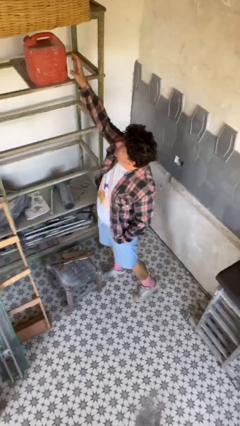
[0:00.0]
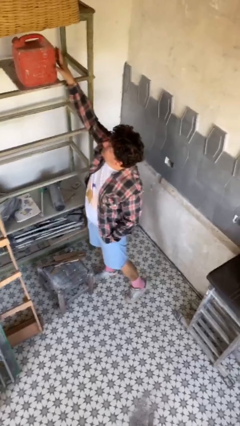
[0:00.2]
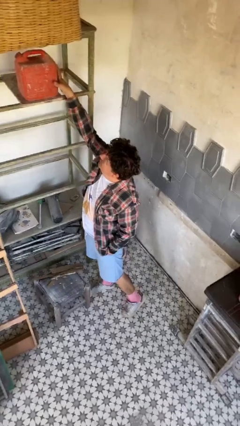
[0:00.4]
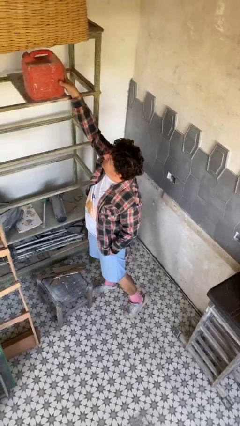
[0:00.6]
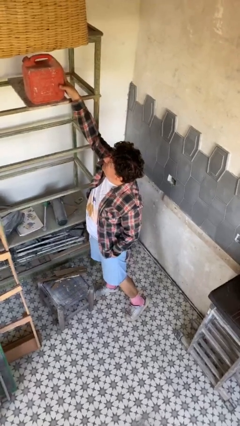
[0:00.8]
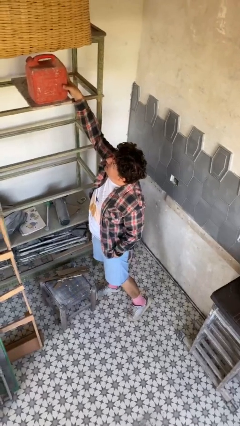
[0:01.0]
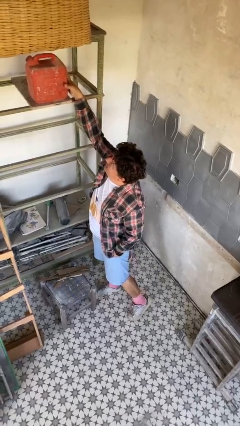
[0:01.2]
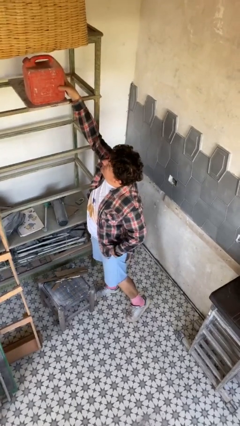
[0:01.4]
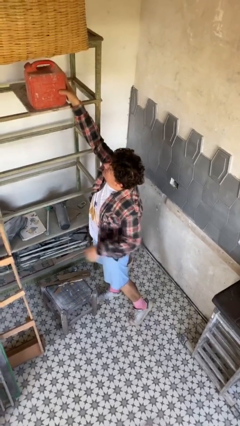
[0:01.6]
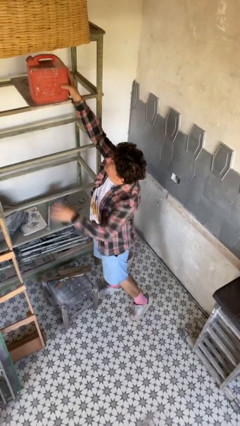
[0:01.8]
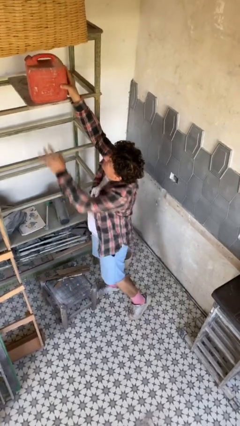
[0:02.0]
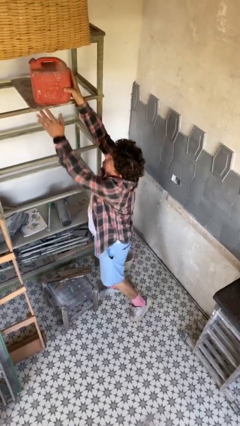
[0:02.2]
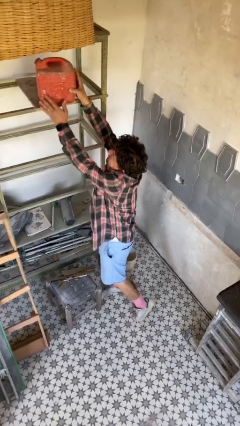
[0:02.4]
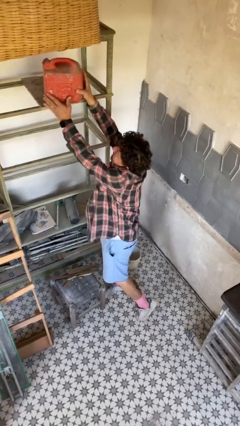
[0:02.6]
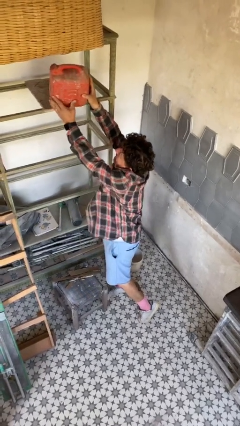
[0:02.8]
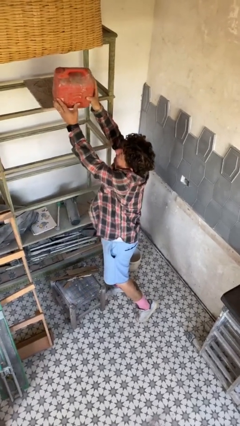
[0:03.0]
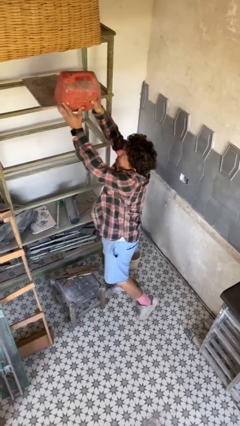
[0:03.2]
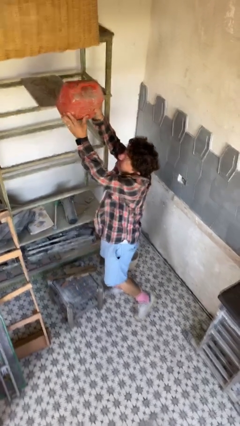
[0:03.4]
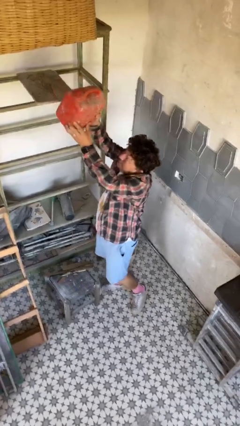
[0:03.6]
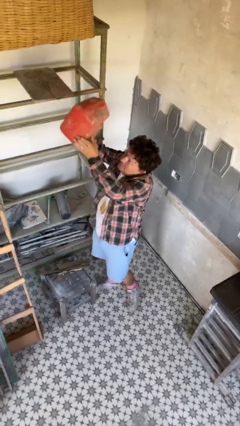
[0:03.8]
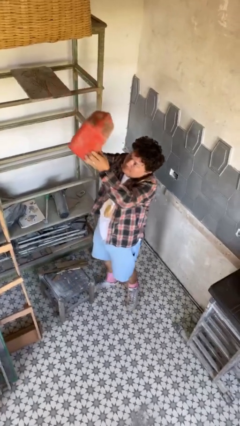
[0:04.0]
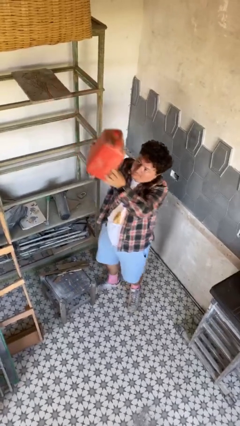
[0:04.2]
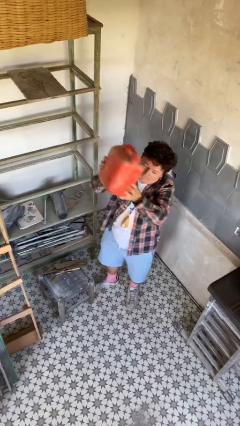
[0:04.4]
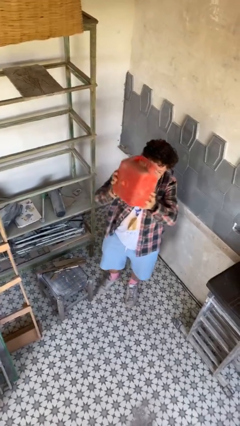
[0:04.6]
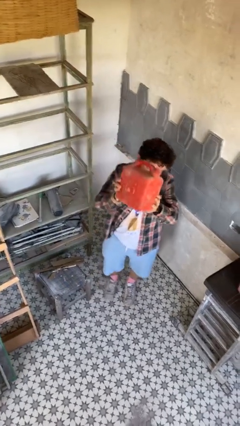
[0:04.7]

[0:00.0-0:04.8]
person picks up object from shelf

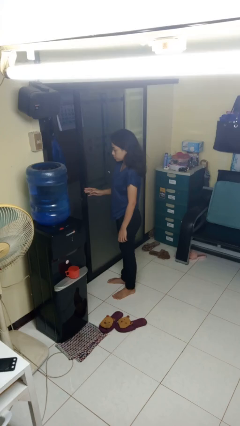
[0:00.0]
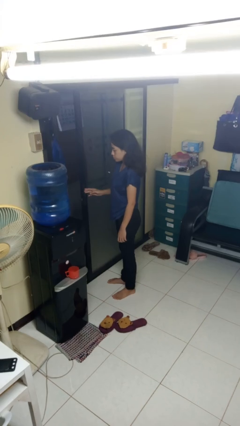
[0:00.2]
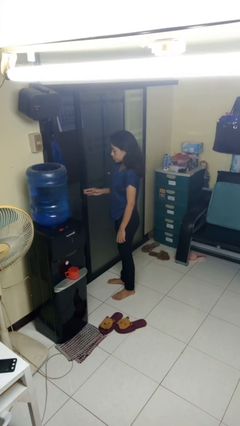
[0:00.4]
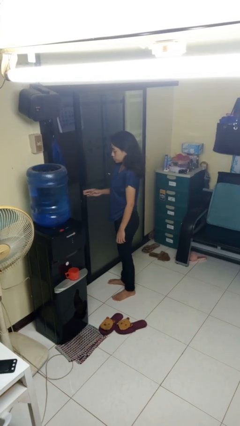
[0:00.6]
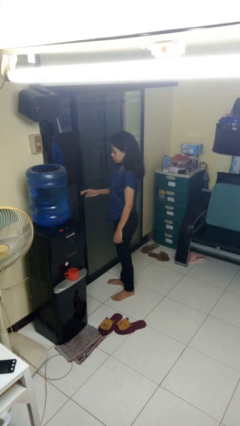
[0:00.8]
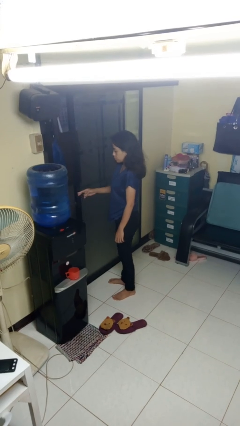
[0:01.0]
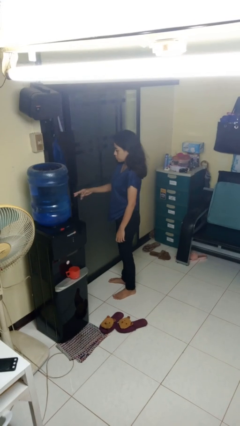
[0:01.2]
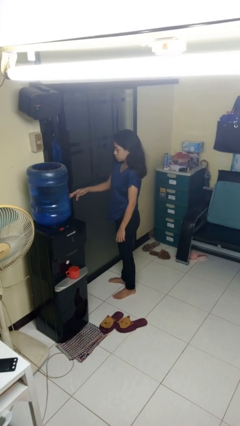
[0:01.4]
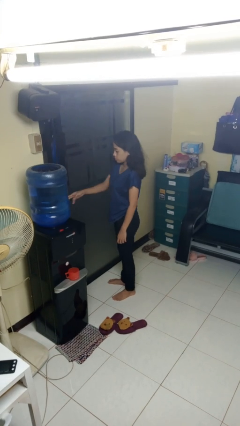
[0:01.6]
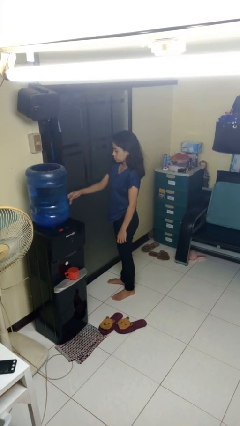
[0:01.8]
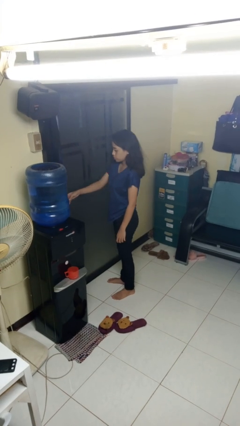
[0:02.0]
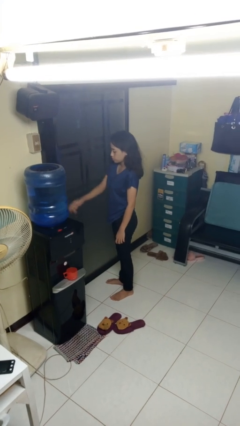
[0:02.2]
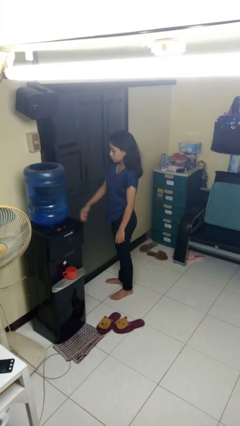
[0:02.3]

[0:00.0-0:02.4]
person closes sliding door

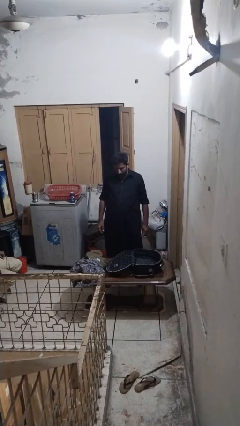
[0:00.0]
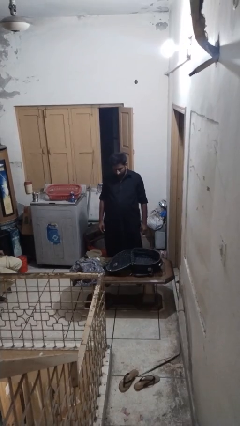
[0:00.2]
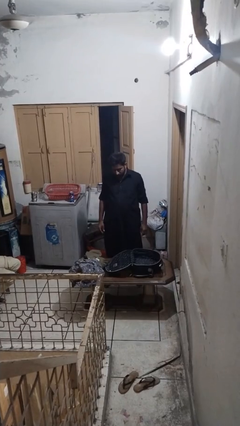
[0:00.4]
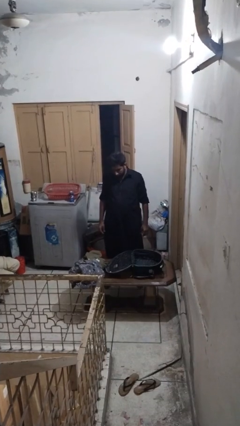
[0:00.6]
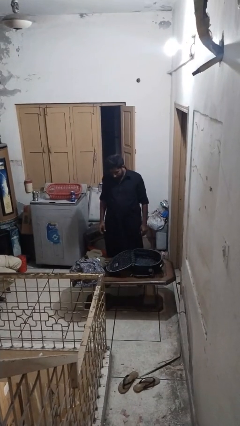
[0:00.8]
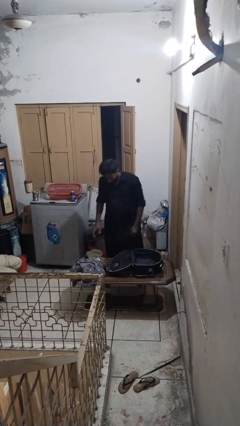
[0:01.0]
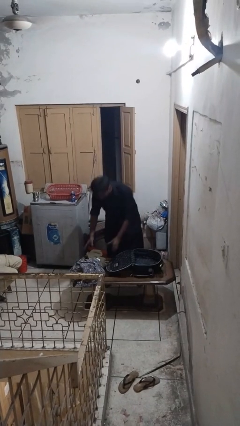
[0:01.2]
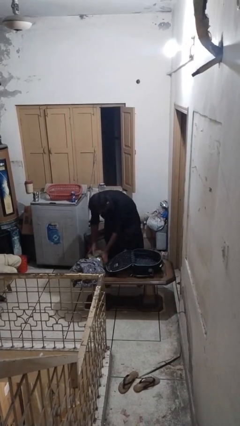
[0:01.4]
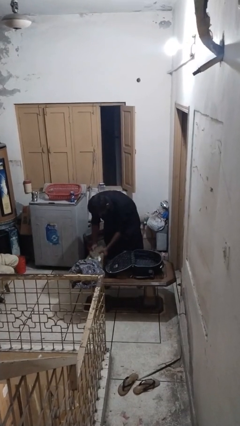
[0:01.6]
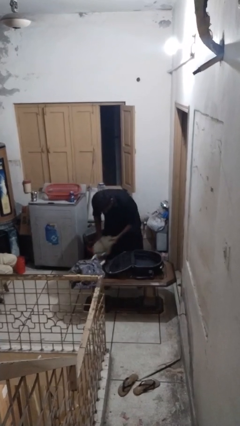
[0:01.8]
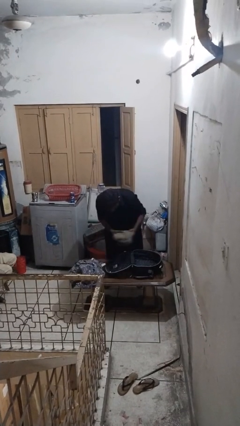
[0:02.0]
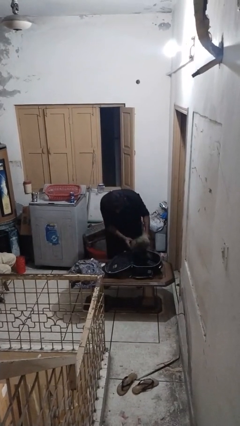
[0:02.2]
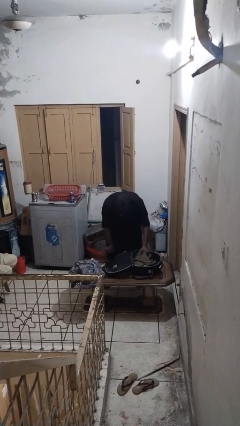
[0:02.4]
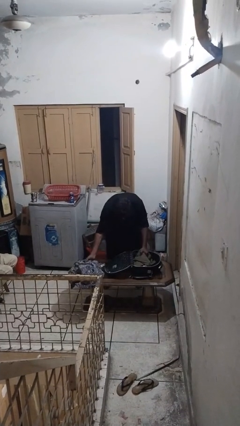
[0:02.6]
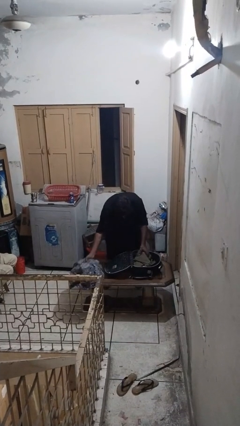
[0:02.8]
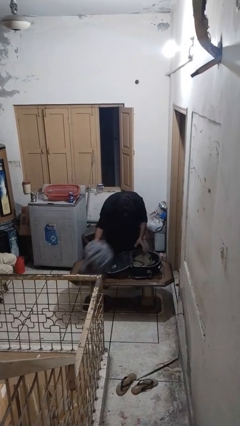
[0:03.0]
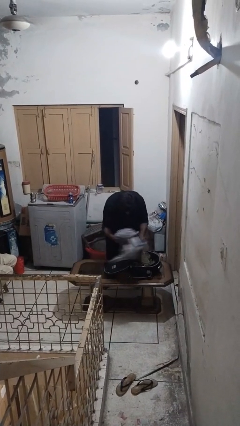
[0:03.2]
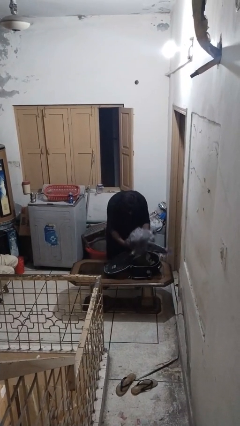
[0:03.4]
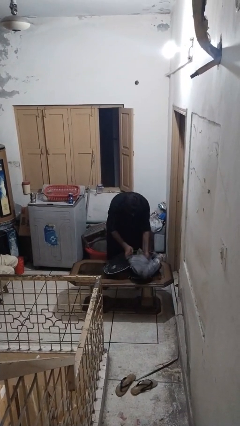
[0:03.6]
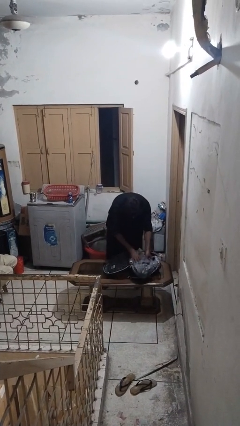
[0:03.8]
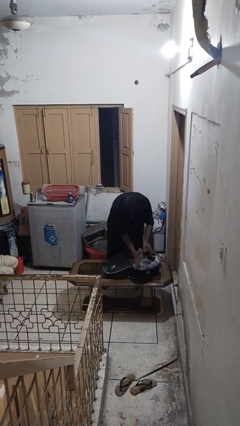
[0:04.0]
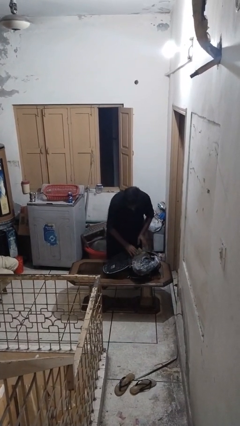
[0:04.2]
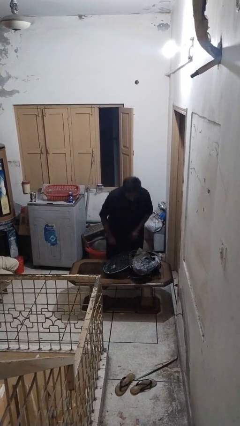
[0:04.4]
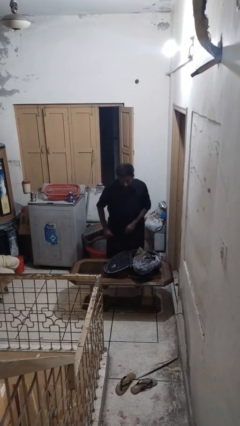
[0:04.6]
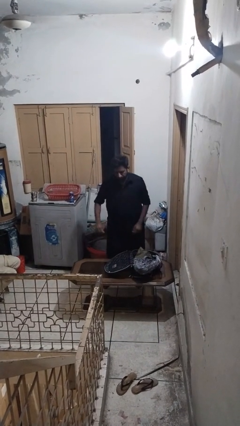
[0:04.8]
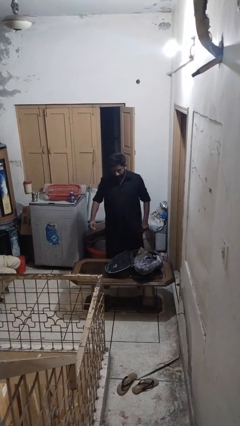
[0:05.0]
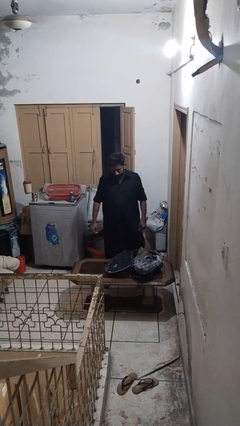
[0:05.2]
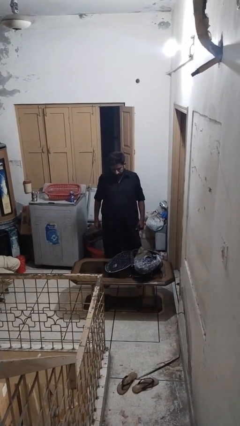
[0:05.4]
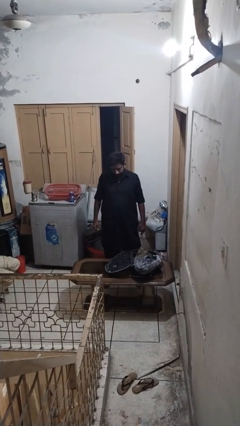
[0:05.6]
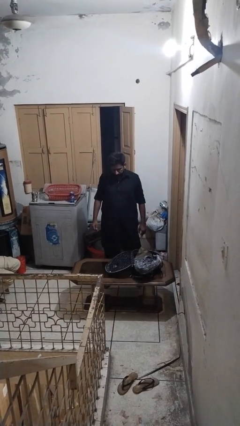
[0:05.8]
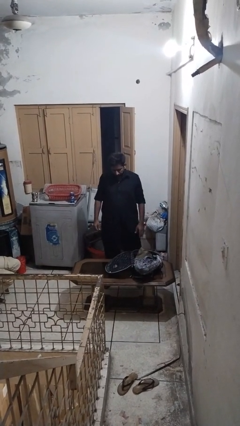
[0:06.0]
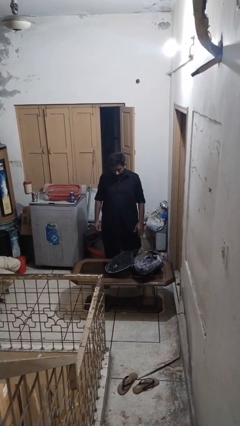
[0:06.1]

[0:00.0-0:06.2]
person loads clothes into suitcase

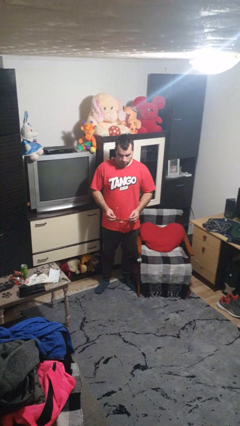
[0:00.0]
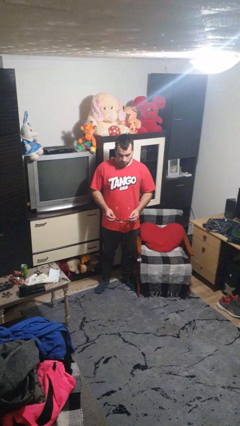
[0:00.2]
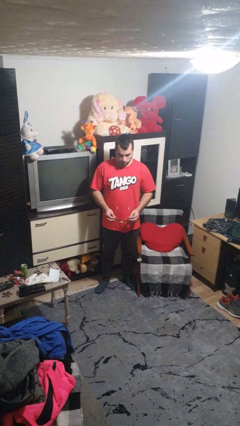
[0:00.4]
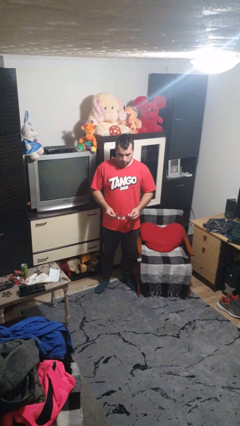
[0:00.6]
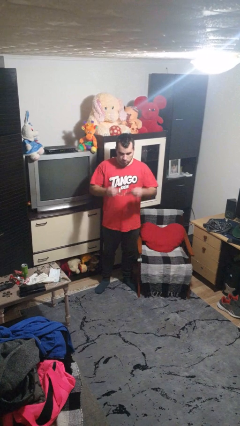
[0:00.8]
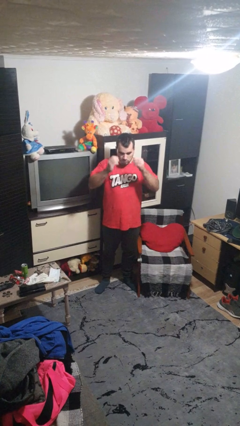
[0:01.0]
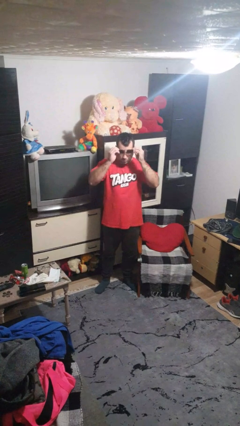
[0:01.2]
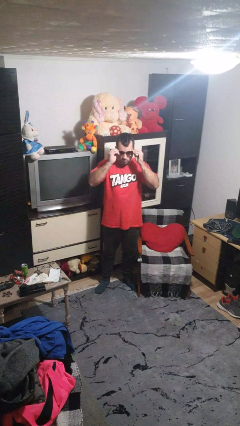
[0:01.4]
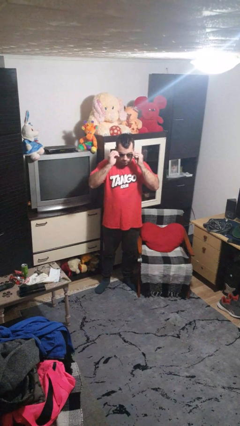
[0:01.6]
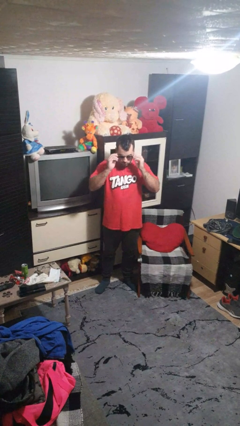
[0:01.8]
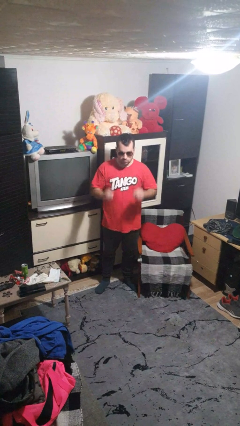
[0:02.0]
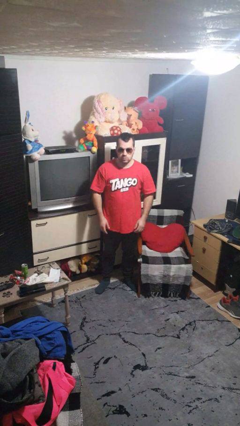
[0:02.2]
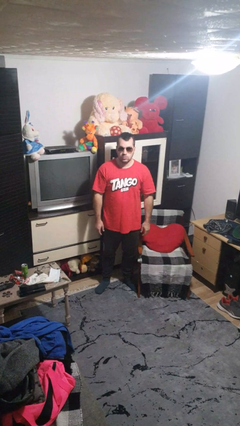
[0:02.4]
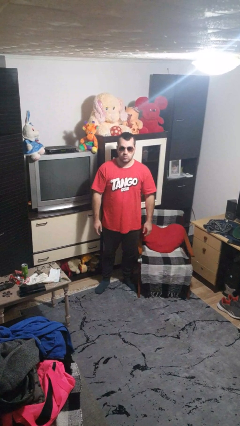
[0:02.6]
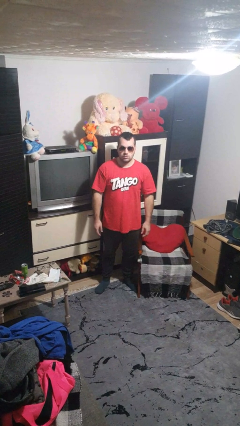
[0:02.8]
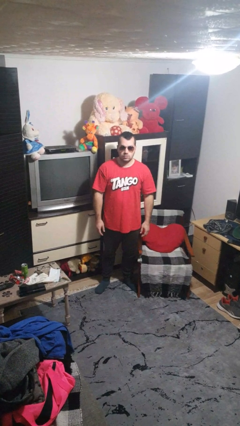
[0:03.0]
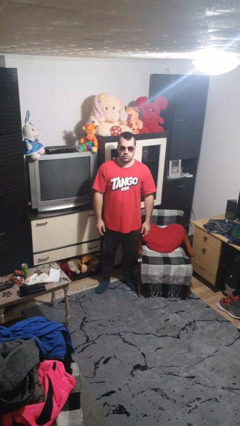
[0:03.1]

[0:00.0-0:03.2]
person puts on sunglasses

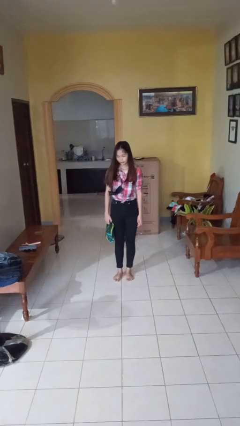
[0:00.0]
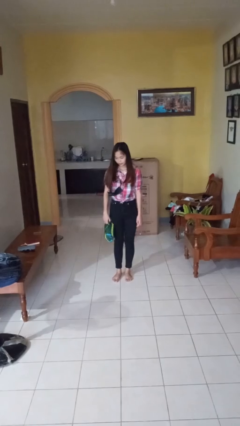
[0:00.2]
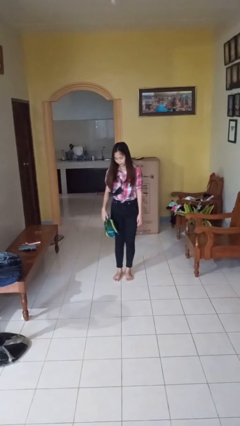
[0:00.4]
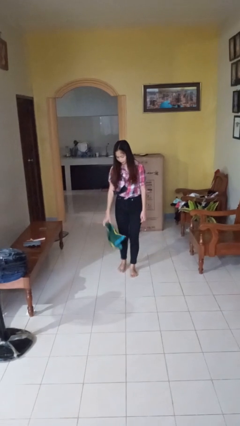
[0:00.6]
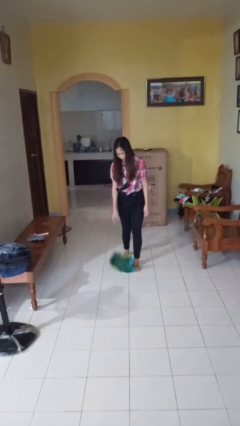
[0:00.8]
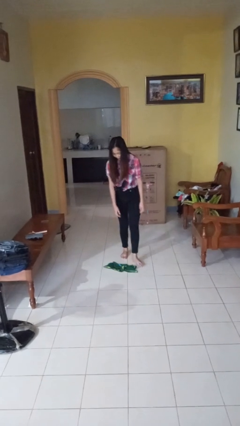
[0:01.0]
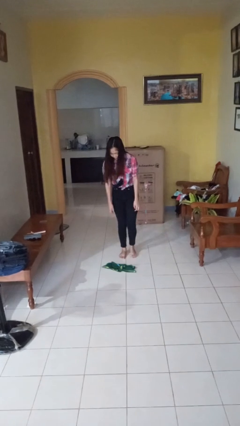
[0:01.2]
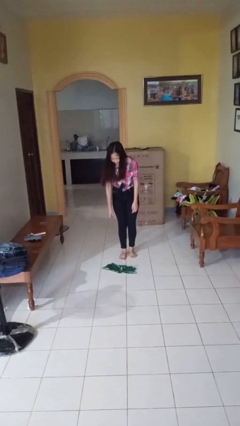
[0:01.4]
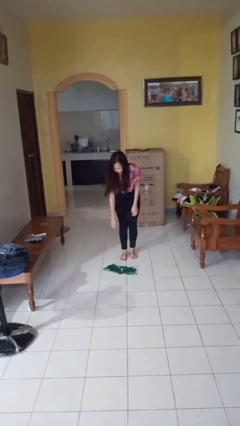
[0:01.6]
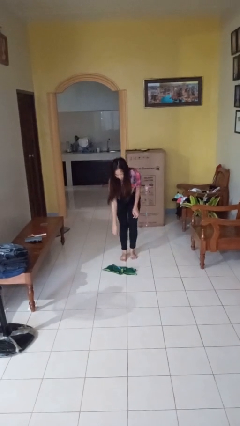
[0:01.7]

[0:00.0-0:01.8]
person throws object into air
